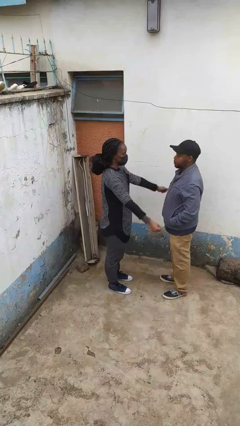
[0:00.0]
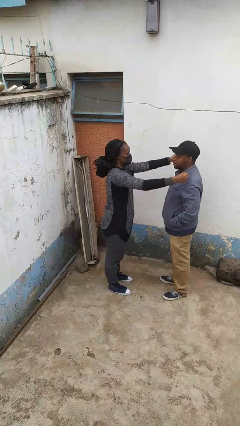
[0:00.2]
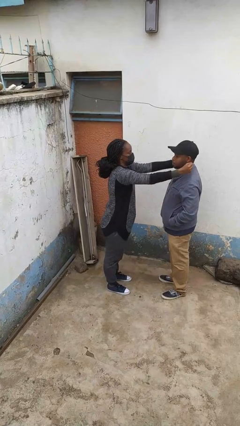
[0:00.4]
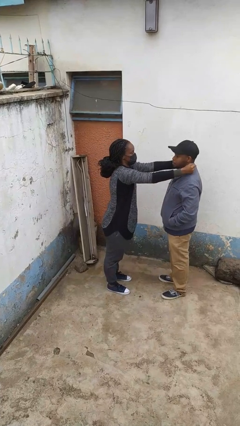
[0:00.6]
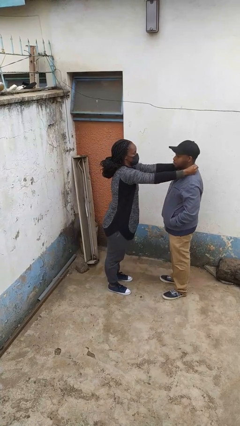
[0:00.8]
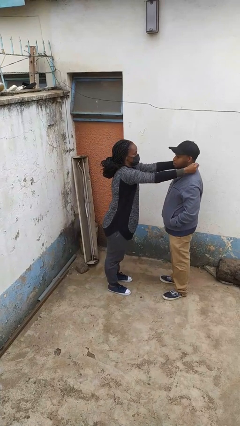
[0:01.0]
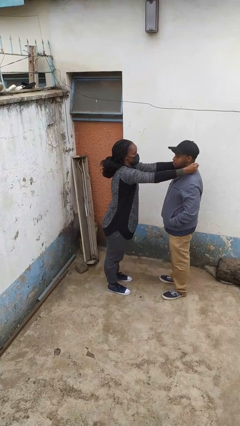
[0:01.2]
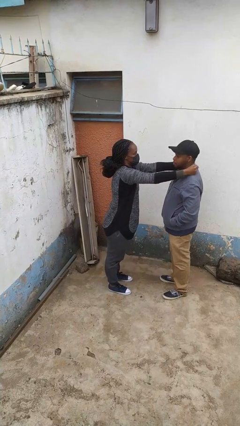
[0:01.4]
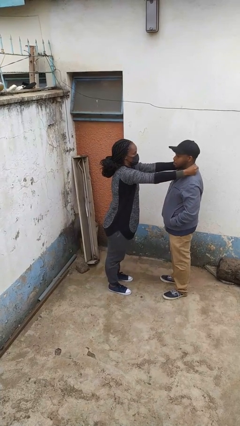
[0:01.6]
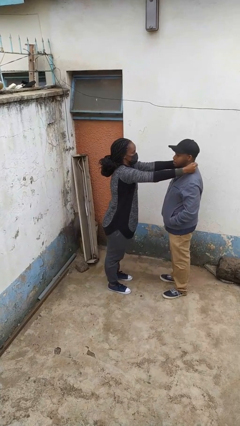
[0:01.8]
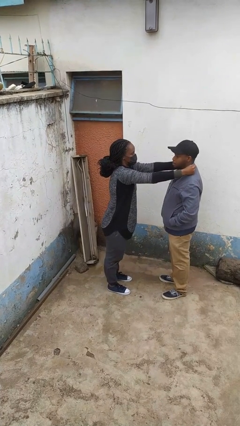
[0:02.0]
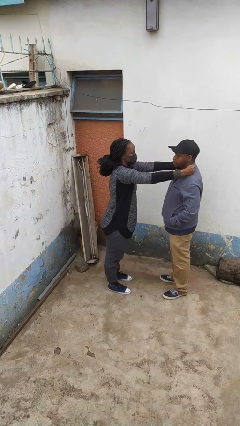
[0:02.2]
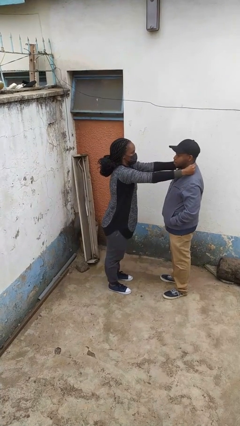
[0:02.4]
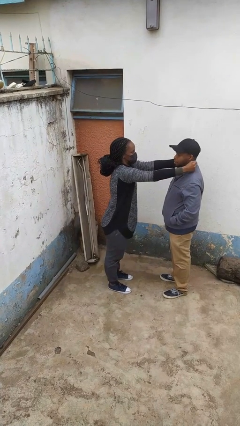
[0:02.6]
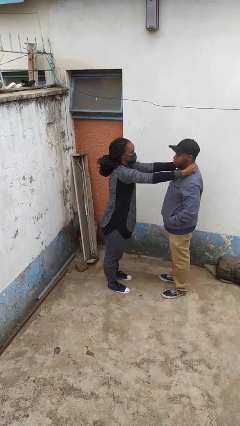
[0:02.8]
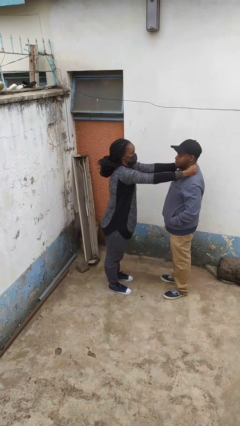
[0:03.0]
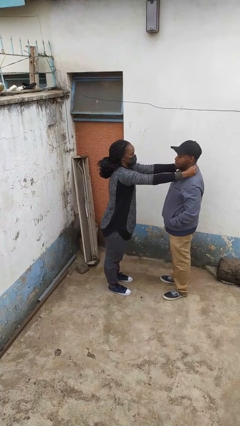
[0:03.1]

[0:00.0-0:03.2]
person pounds shoulders of person

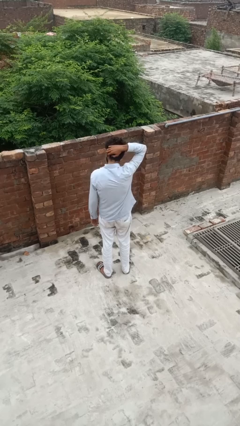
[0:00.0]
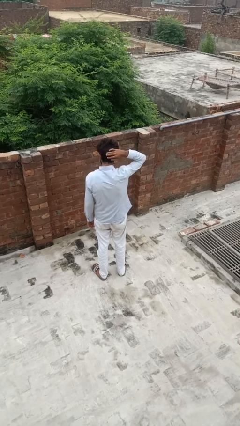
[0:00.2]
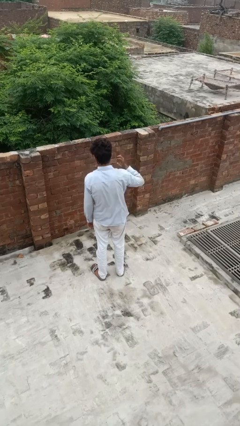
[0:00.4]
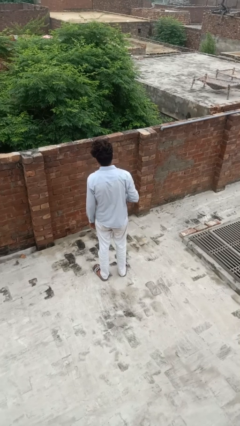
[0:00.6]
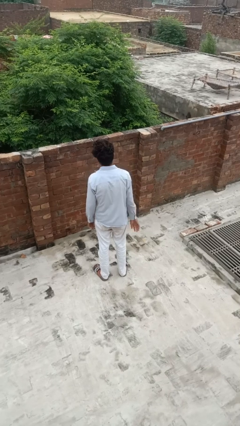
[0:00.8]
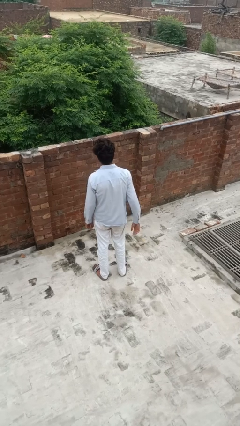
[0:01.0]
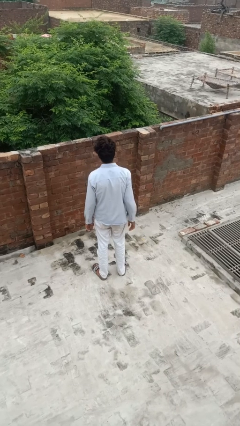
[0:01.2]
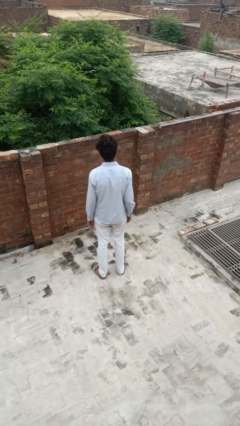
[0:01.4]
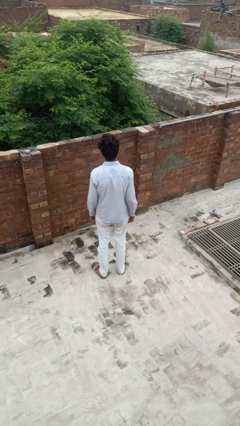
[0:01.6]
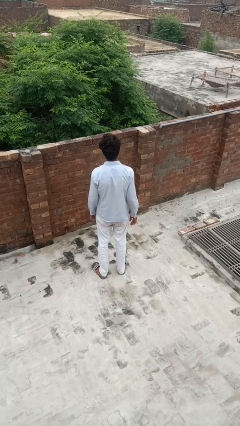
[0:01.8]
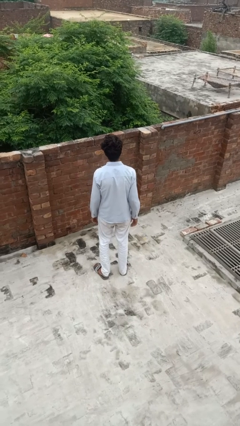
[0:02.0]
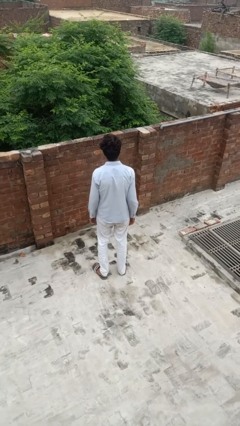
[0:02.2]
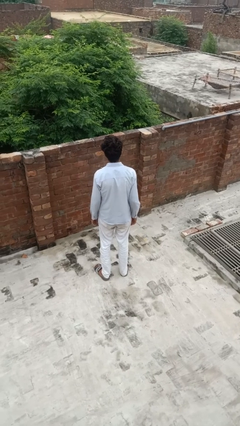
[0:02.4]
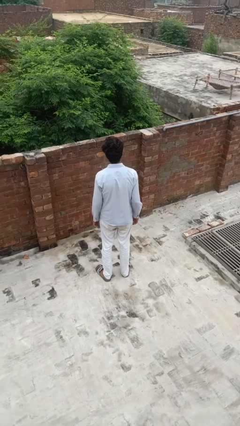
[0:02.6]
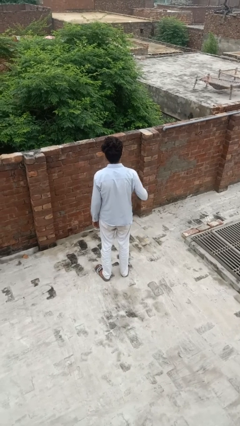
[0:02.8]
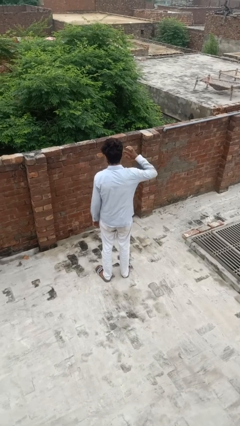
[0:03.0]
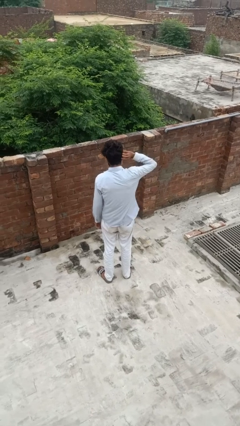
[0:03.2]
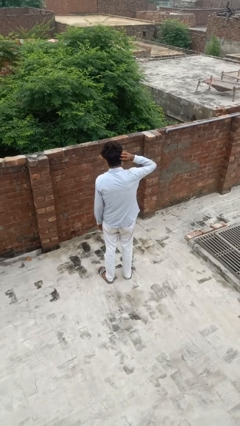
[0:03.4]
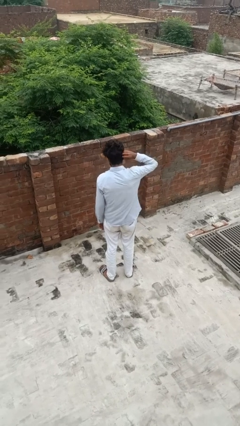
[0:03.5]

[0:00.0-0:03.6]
person scratches face

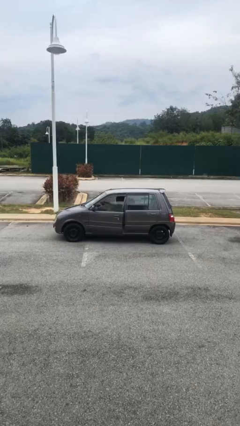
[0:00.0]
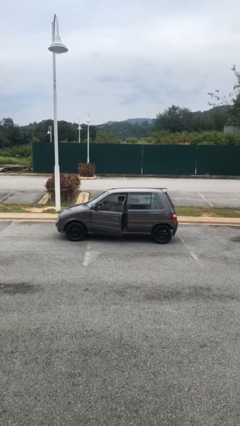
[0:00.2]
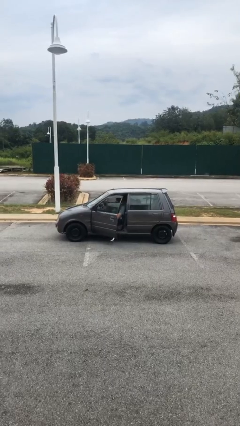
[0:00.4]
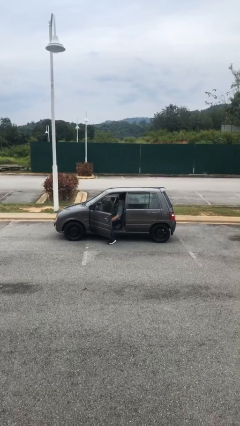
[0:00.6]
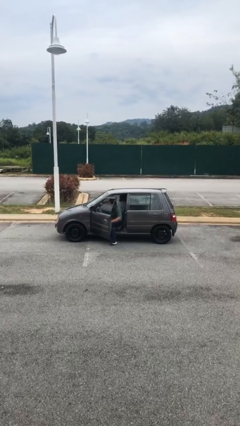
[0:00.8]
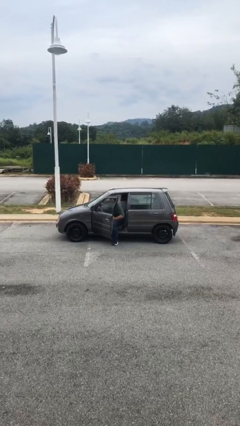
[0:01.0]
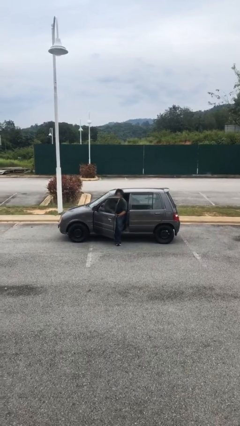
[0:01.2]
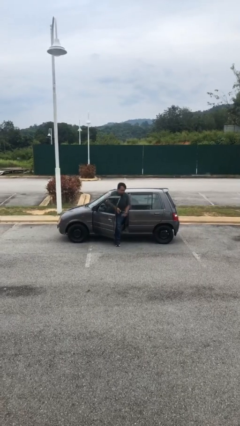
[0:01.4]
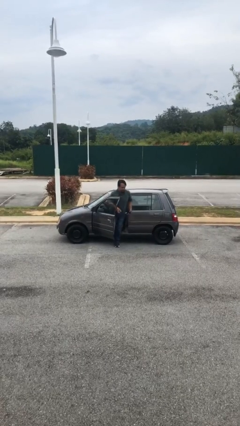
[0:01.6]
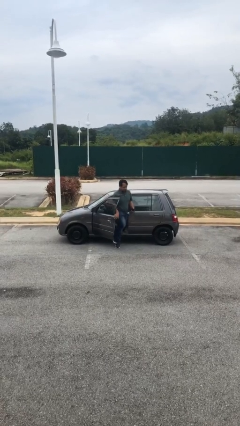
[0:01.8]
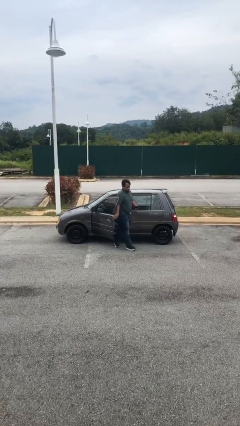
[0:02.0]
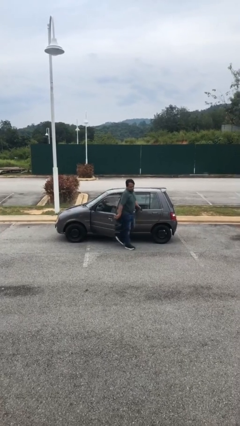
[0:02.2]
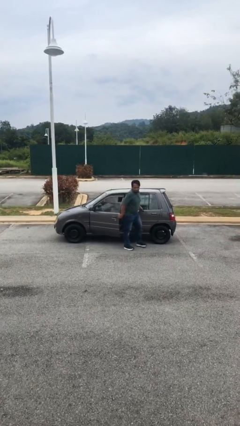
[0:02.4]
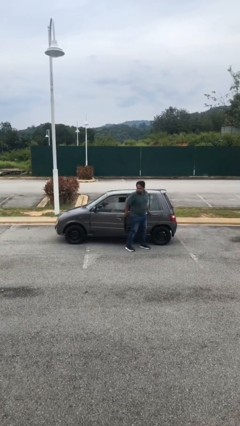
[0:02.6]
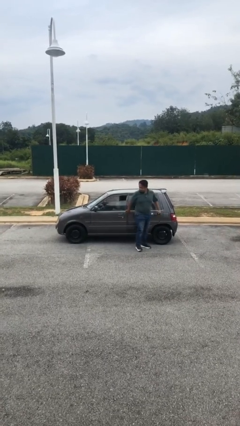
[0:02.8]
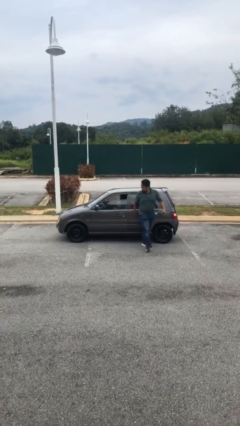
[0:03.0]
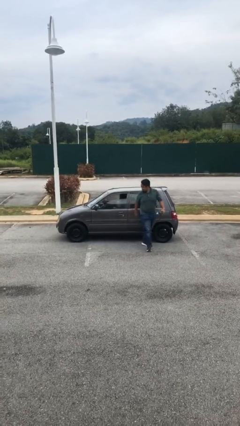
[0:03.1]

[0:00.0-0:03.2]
car drops off person

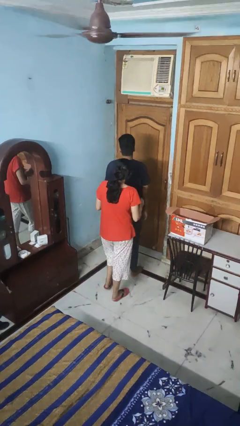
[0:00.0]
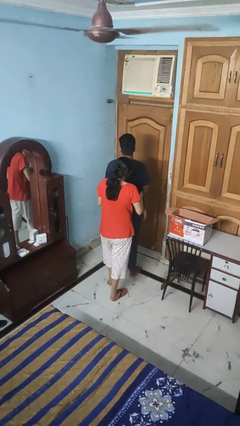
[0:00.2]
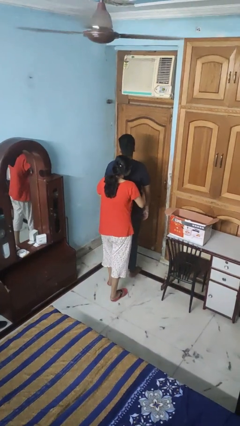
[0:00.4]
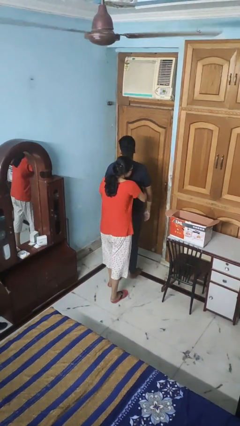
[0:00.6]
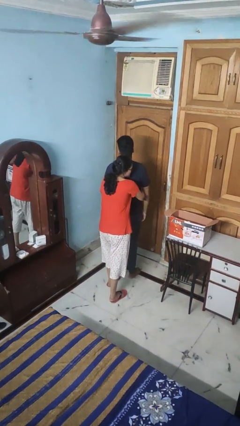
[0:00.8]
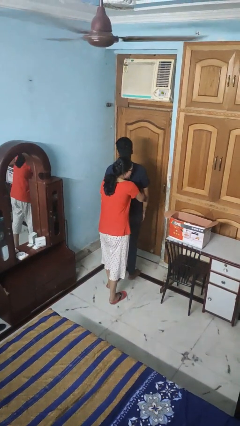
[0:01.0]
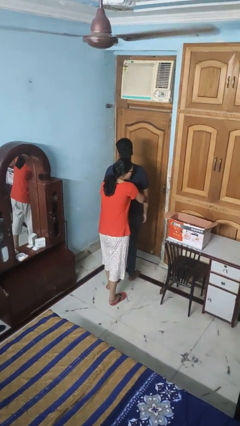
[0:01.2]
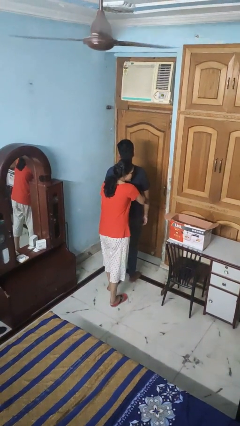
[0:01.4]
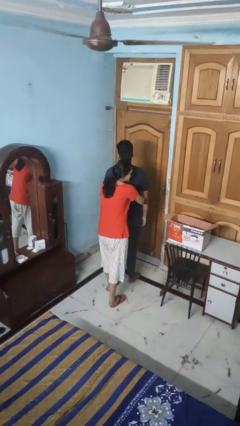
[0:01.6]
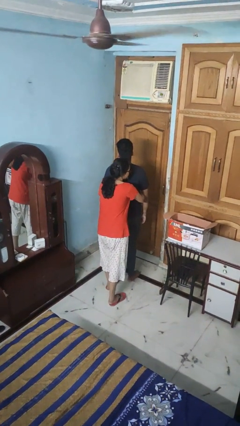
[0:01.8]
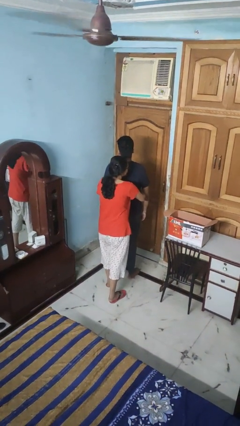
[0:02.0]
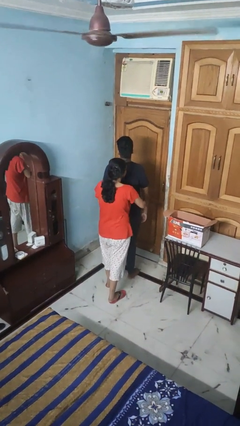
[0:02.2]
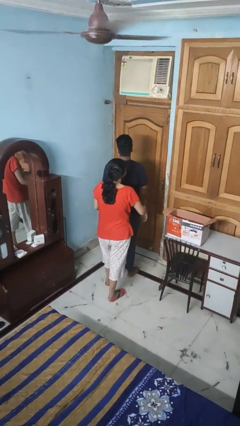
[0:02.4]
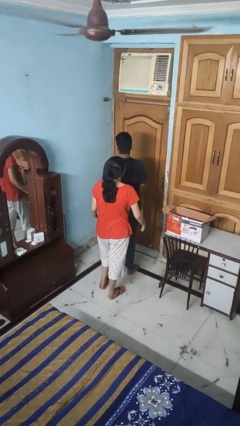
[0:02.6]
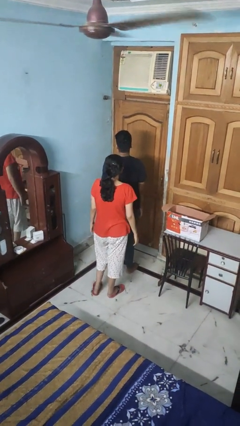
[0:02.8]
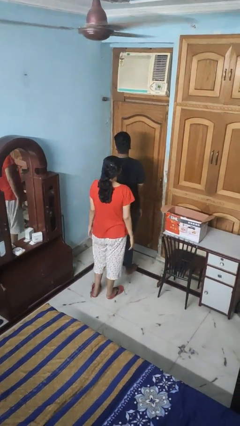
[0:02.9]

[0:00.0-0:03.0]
person hugs person from behind

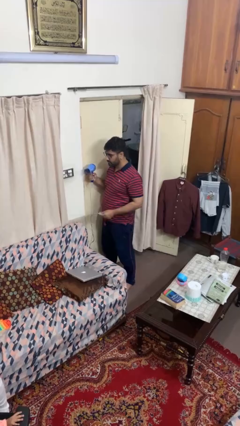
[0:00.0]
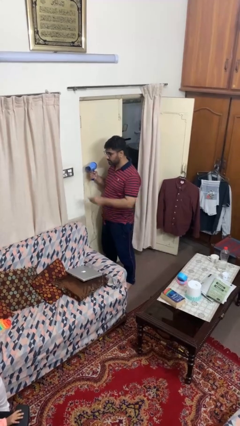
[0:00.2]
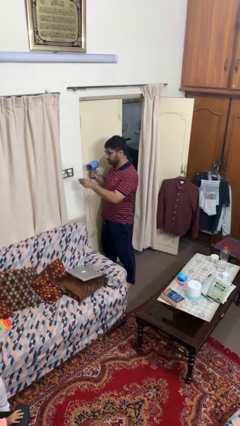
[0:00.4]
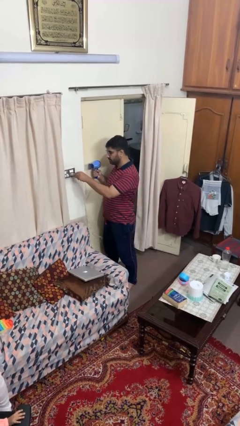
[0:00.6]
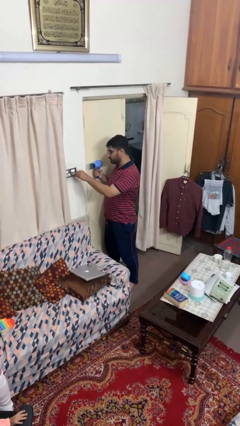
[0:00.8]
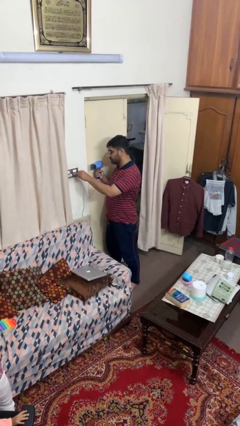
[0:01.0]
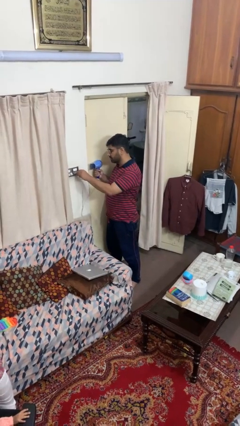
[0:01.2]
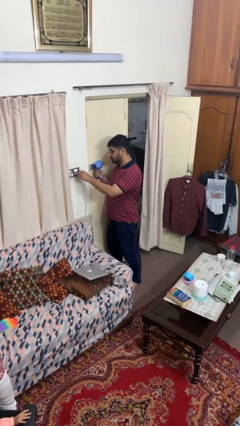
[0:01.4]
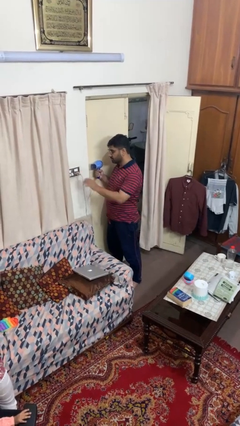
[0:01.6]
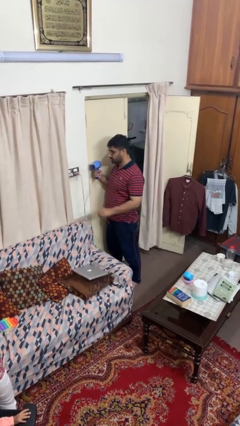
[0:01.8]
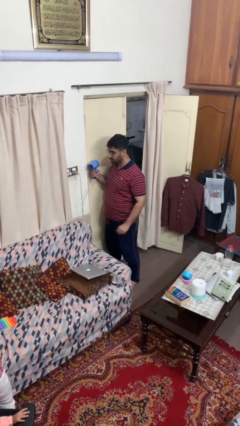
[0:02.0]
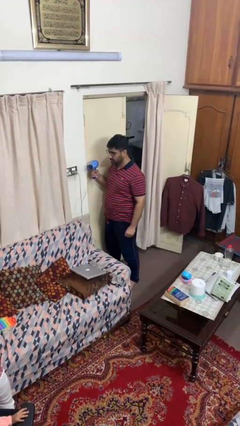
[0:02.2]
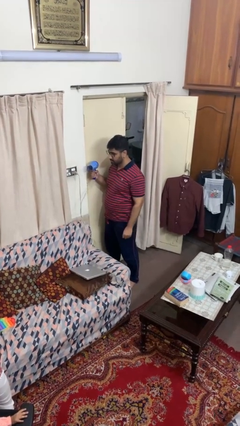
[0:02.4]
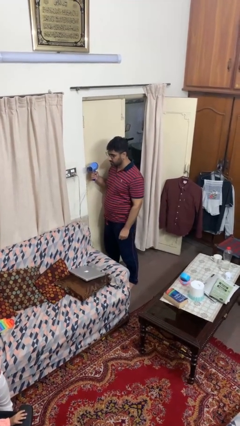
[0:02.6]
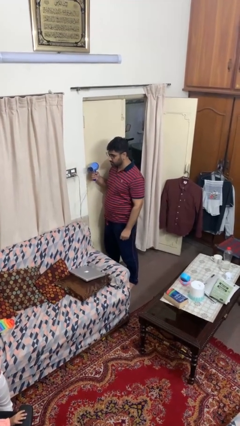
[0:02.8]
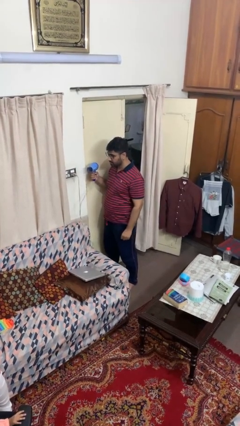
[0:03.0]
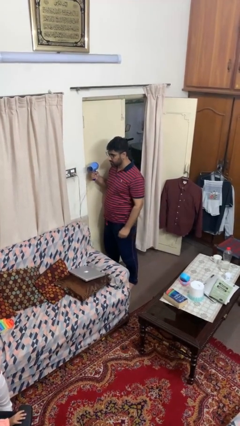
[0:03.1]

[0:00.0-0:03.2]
person plugs into electrical socket

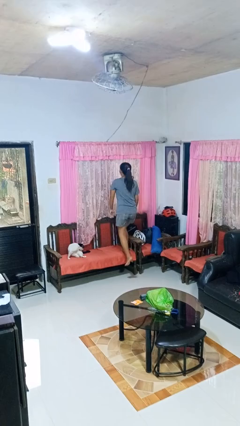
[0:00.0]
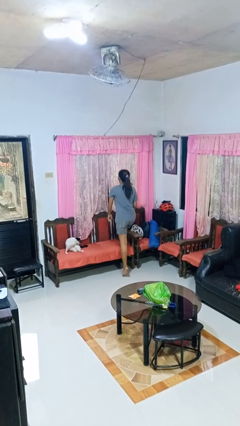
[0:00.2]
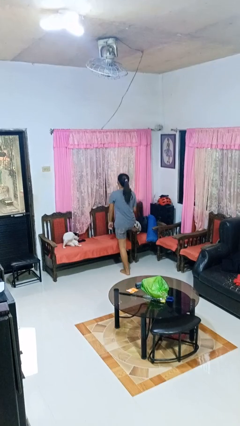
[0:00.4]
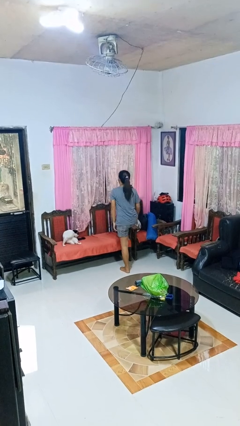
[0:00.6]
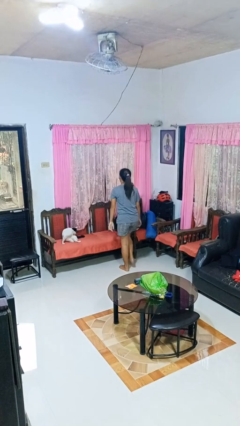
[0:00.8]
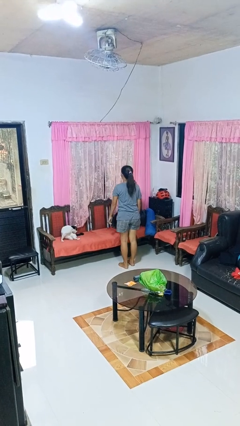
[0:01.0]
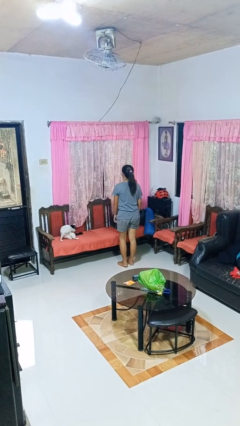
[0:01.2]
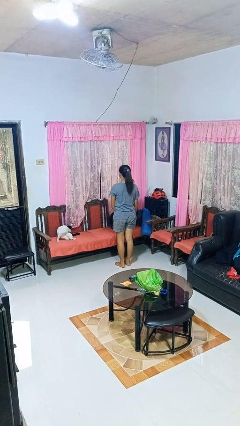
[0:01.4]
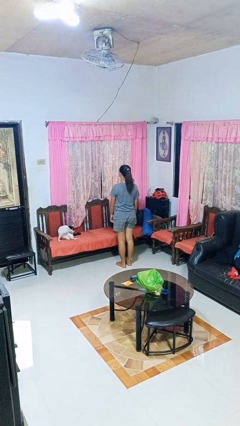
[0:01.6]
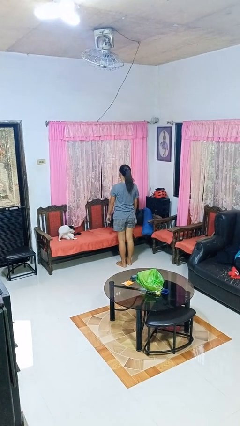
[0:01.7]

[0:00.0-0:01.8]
person climbs off chair
